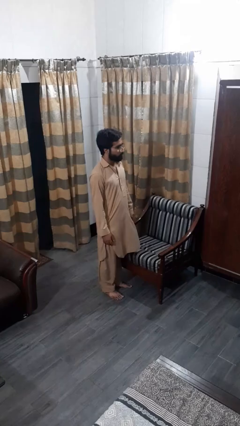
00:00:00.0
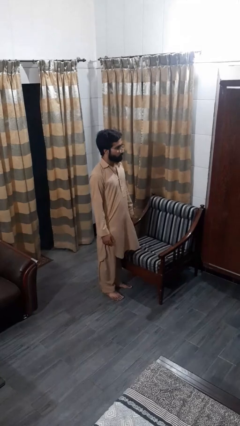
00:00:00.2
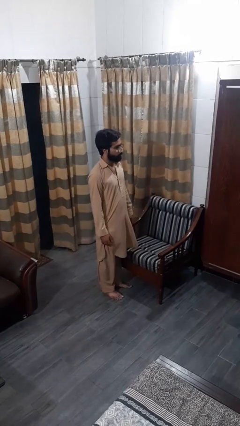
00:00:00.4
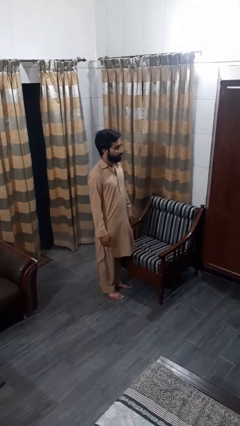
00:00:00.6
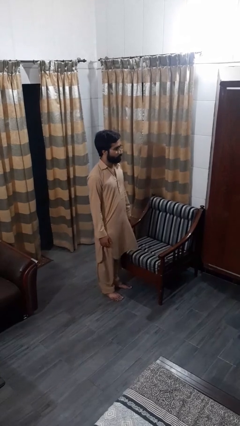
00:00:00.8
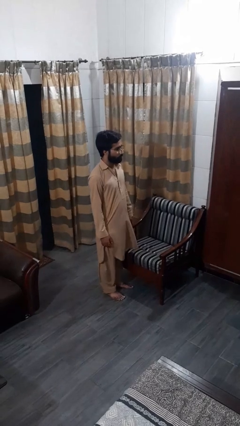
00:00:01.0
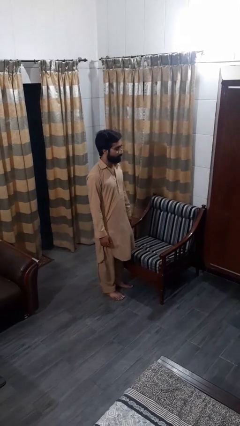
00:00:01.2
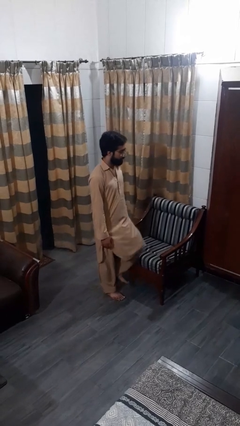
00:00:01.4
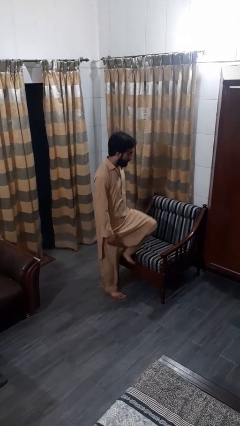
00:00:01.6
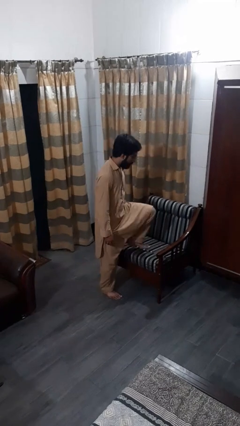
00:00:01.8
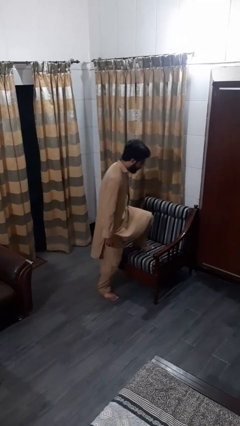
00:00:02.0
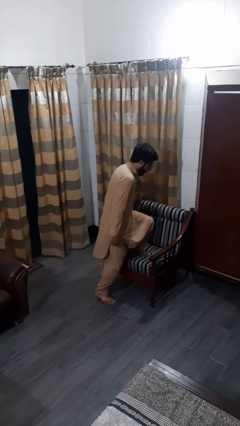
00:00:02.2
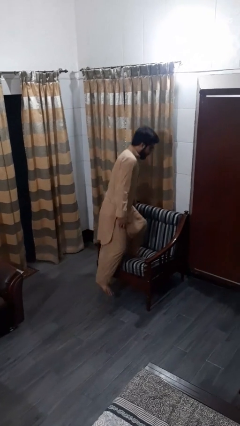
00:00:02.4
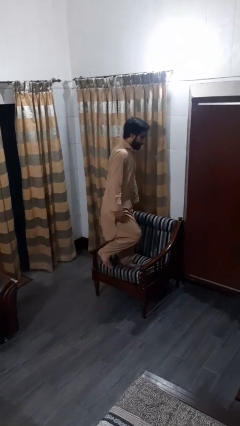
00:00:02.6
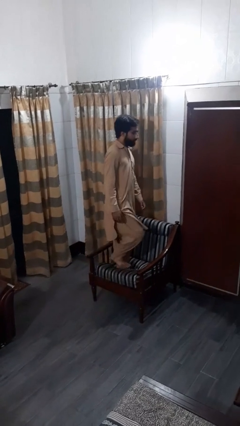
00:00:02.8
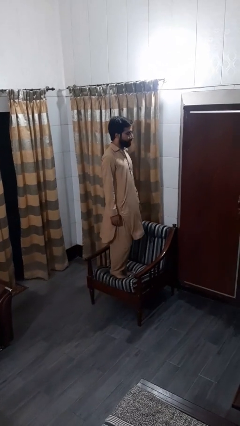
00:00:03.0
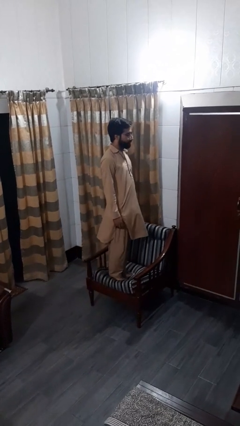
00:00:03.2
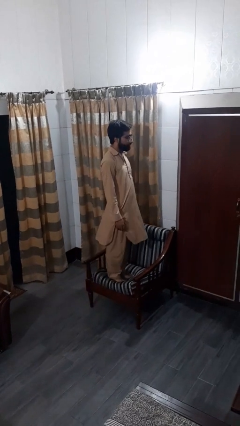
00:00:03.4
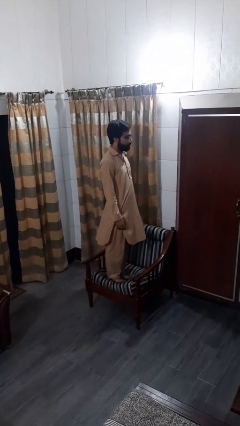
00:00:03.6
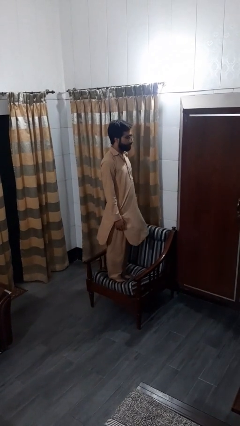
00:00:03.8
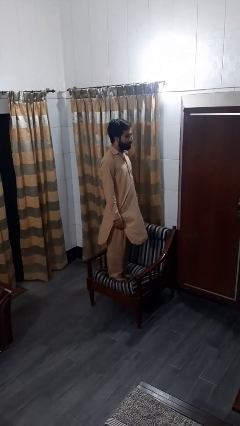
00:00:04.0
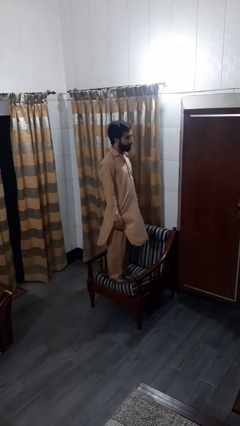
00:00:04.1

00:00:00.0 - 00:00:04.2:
person climbs on chair

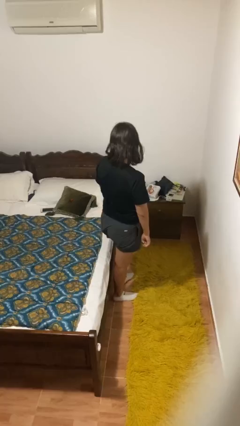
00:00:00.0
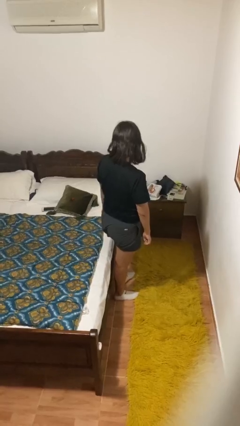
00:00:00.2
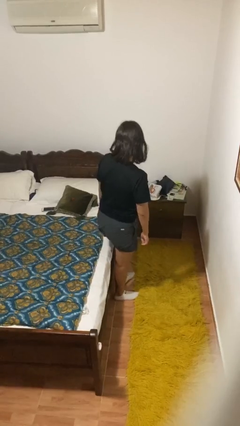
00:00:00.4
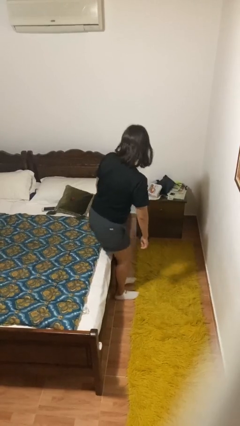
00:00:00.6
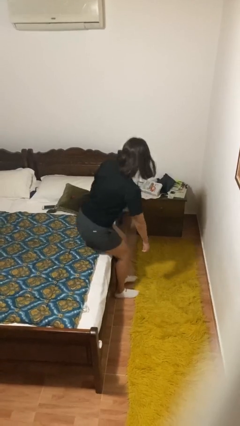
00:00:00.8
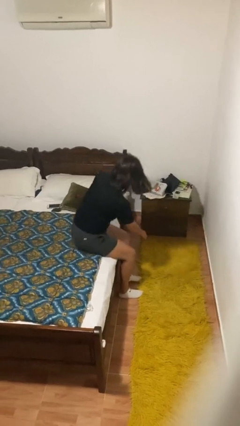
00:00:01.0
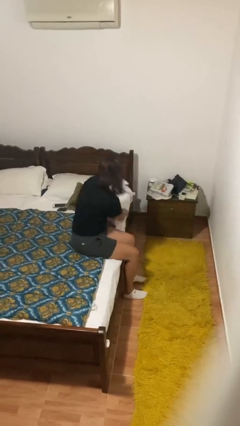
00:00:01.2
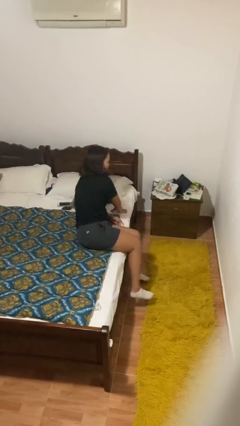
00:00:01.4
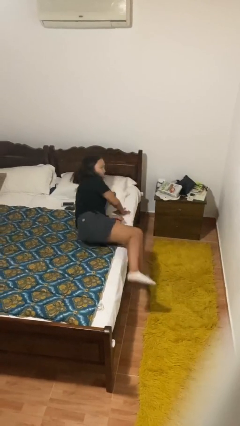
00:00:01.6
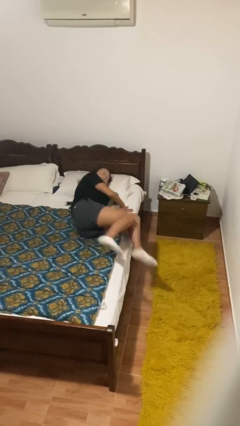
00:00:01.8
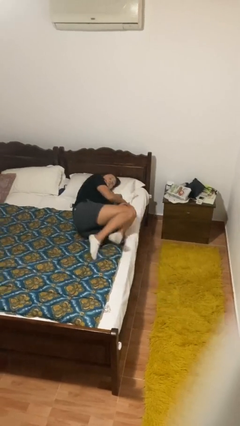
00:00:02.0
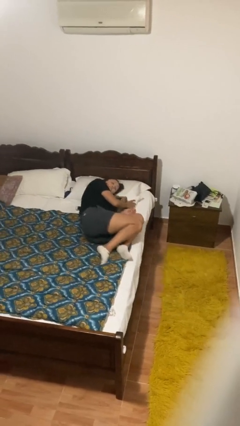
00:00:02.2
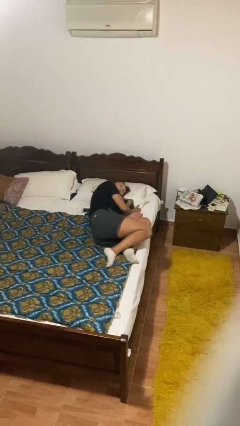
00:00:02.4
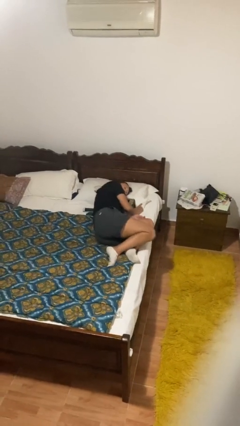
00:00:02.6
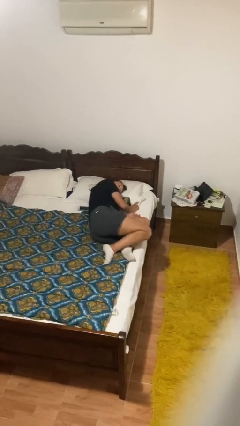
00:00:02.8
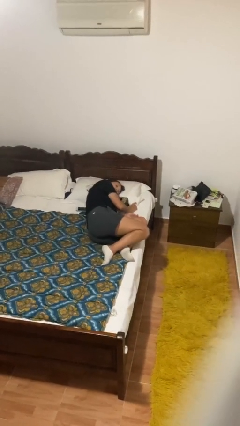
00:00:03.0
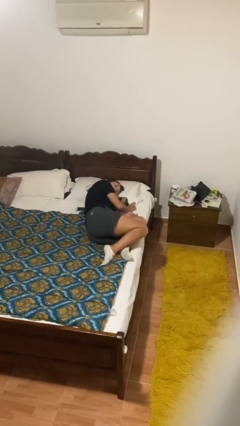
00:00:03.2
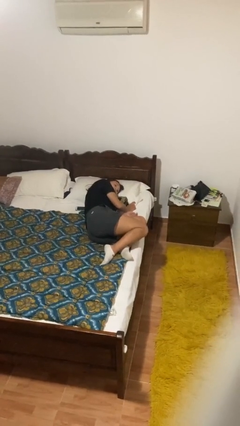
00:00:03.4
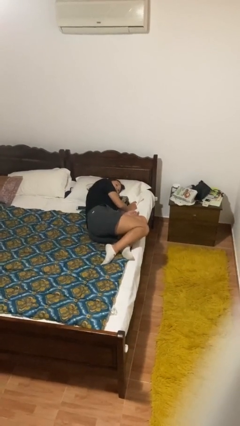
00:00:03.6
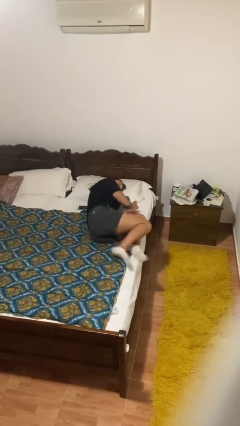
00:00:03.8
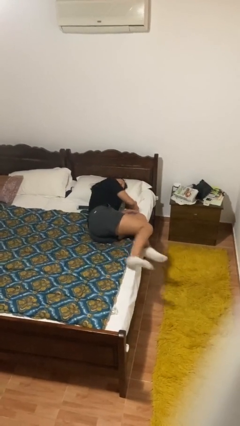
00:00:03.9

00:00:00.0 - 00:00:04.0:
person lies down on bed

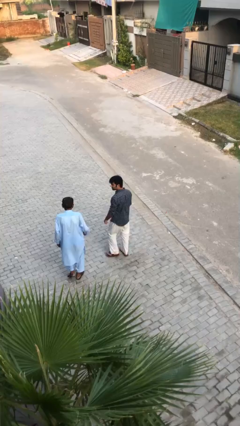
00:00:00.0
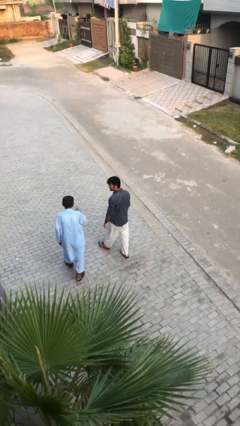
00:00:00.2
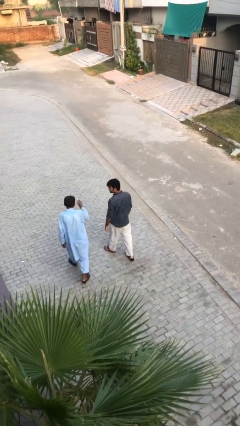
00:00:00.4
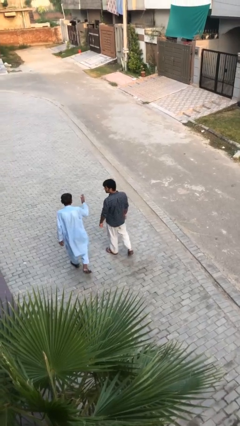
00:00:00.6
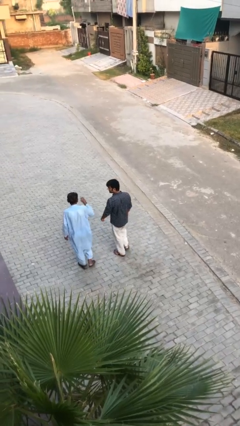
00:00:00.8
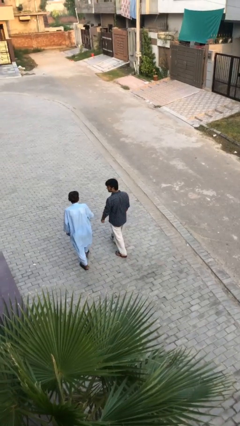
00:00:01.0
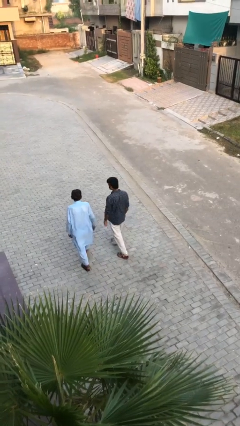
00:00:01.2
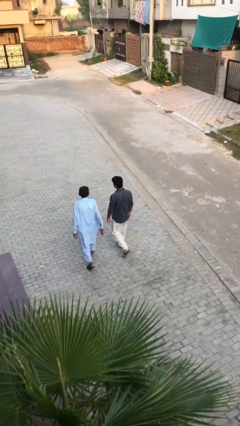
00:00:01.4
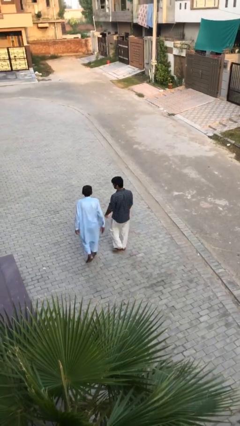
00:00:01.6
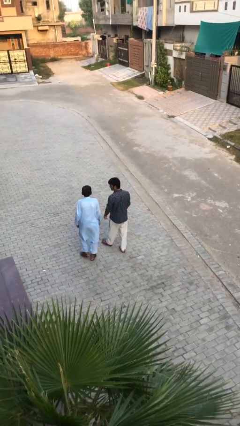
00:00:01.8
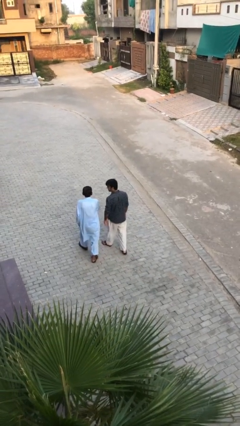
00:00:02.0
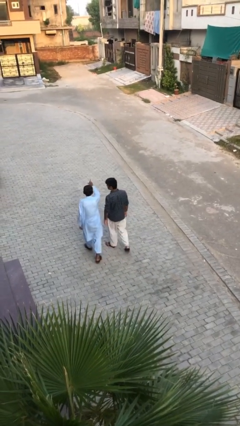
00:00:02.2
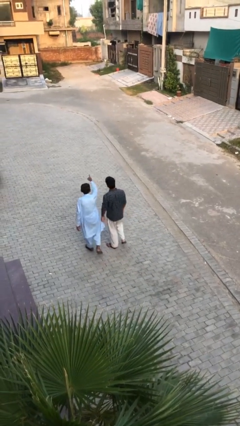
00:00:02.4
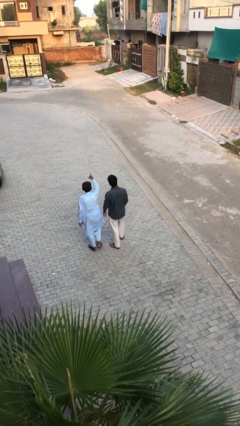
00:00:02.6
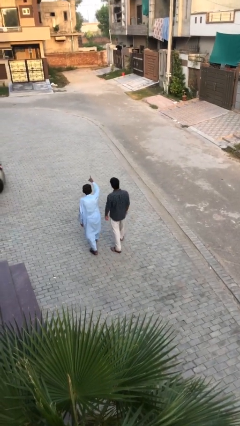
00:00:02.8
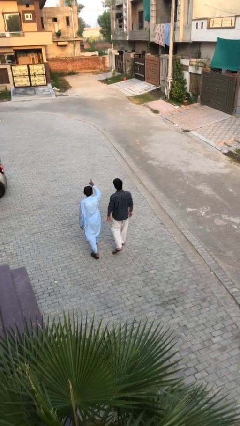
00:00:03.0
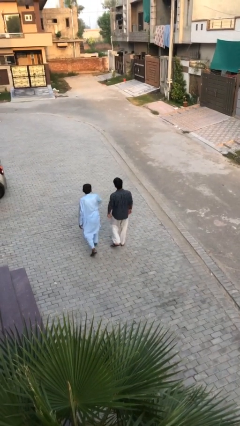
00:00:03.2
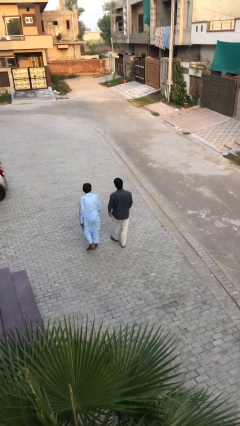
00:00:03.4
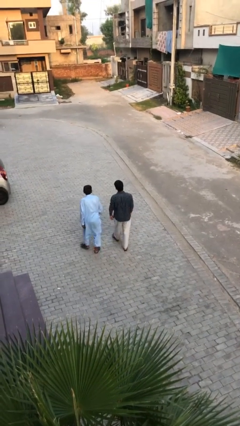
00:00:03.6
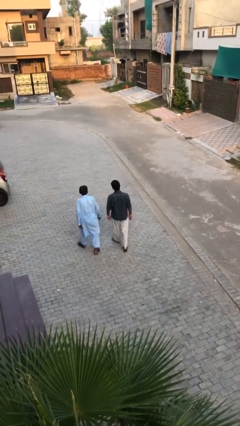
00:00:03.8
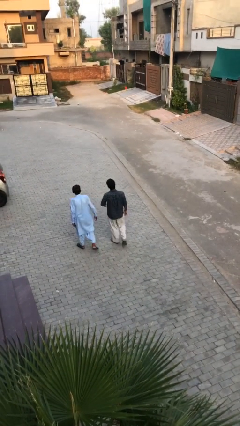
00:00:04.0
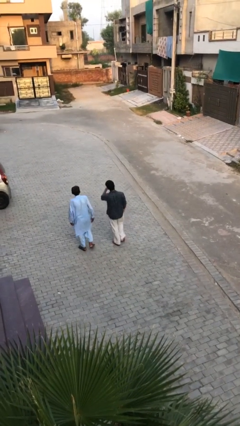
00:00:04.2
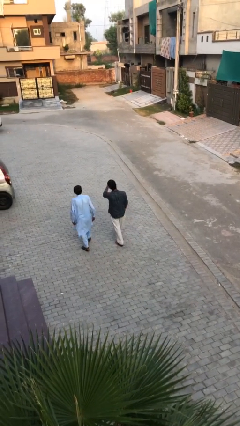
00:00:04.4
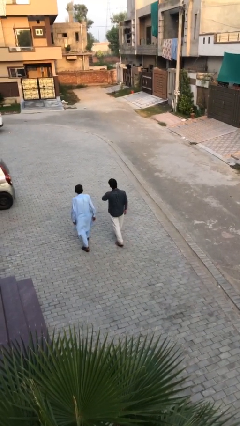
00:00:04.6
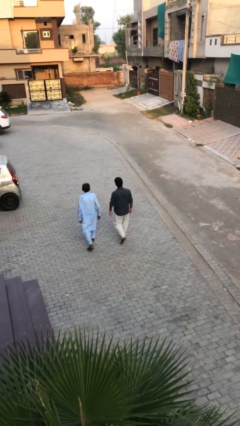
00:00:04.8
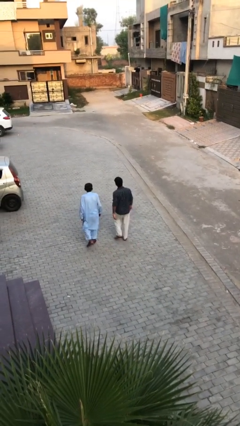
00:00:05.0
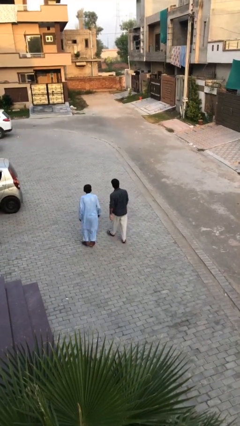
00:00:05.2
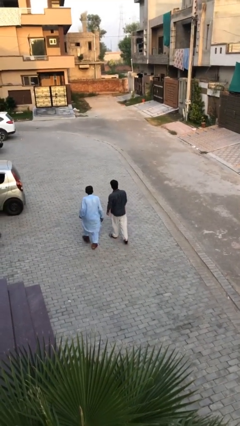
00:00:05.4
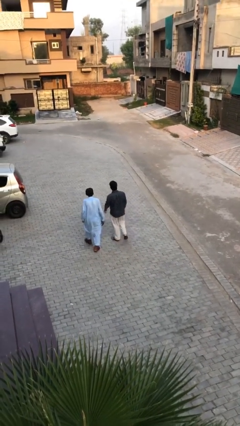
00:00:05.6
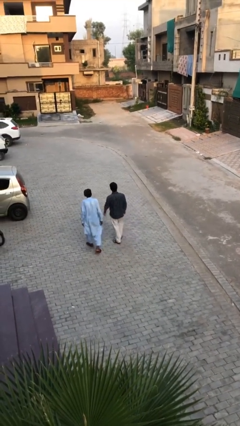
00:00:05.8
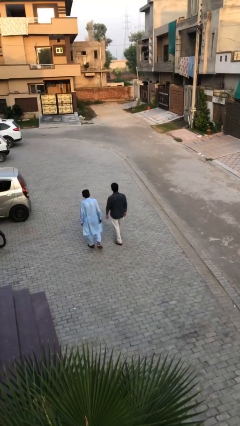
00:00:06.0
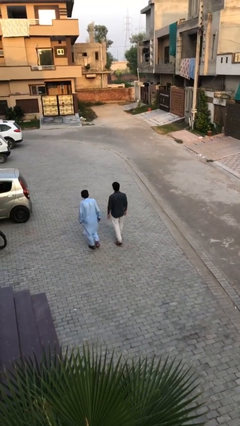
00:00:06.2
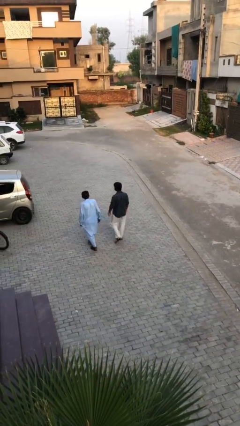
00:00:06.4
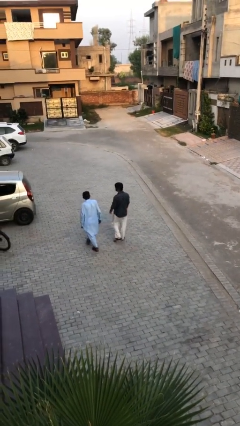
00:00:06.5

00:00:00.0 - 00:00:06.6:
person talks to person

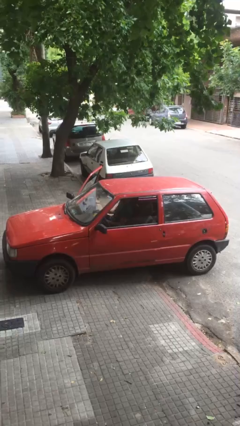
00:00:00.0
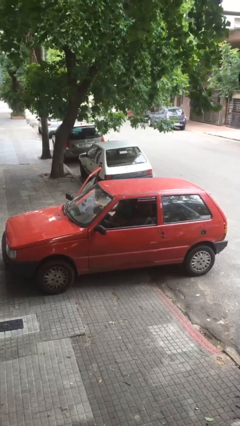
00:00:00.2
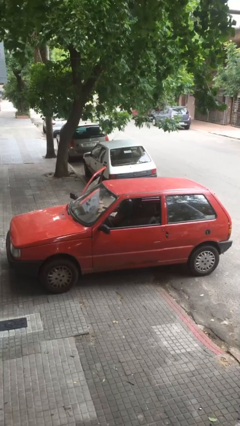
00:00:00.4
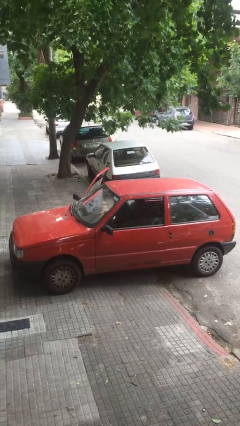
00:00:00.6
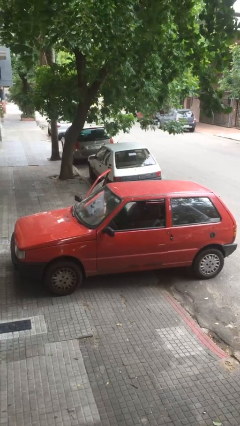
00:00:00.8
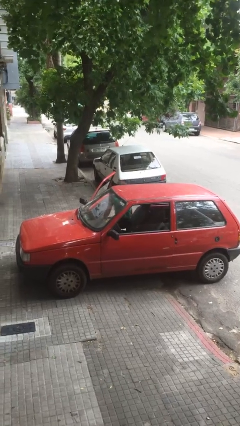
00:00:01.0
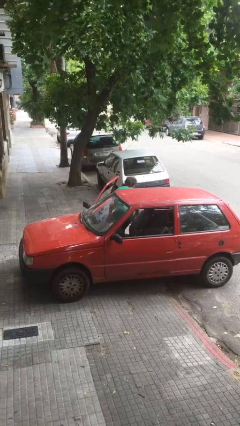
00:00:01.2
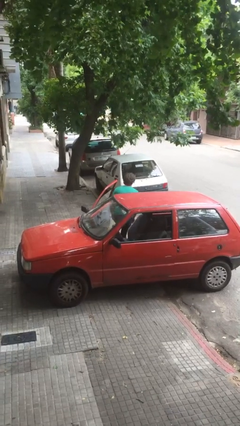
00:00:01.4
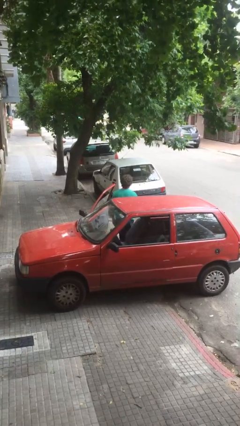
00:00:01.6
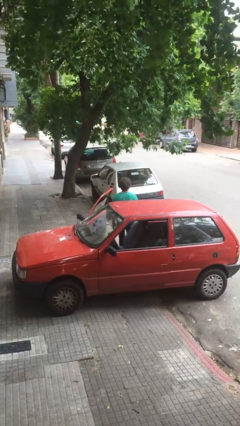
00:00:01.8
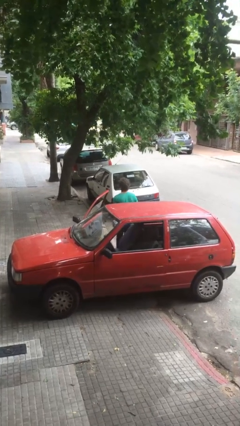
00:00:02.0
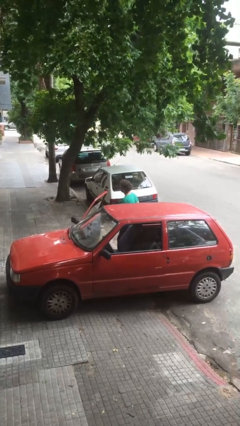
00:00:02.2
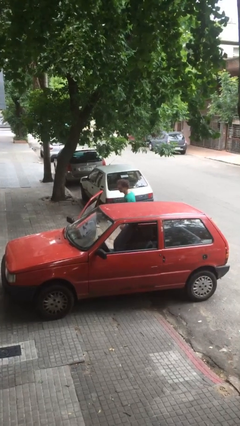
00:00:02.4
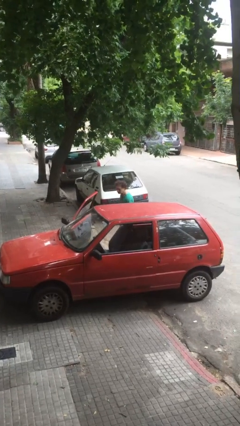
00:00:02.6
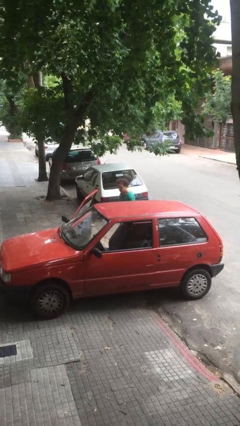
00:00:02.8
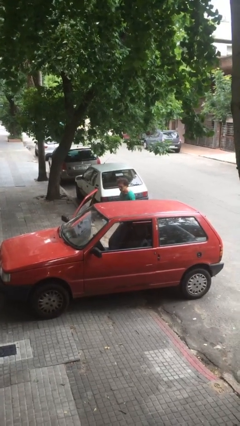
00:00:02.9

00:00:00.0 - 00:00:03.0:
person exits car
